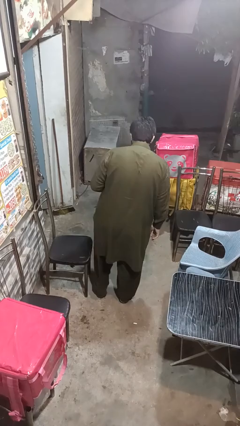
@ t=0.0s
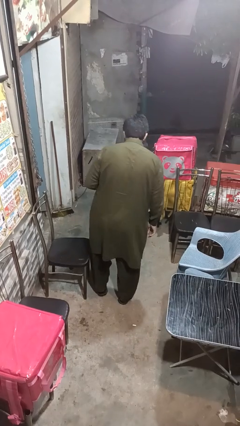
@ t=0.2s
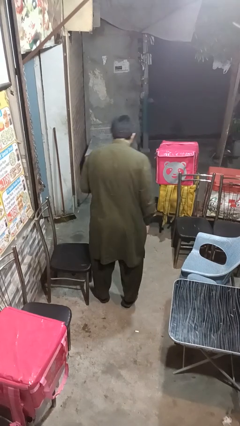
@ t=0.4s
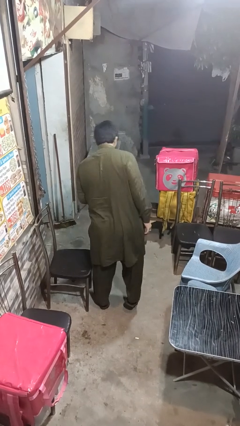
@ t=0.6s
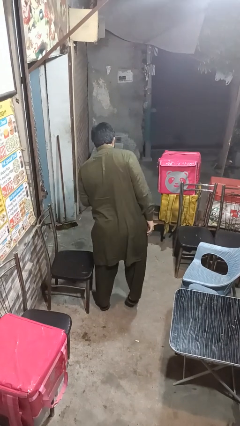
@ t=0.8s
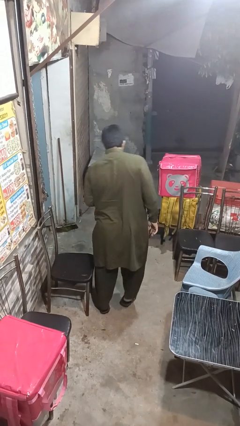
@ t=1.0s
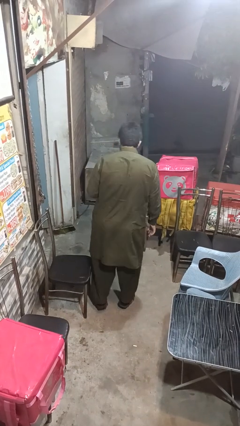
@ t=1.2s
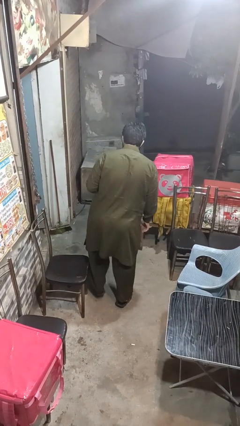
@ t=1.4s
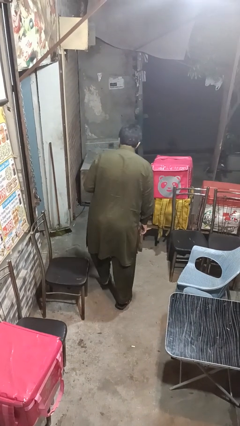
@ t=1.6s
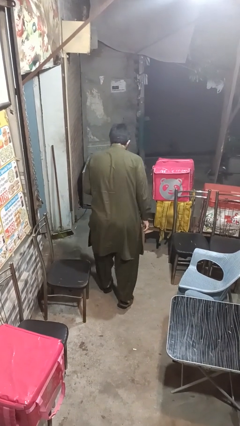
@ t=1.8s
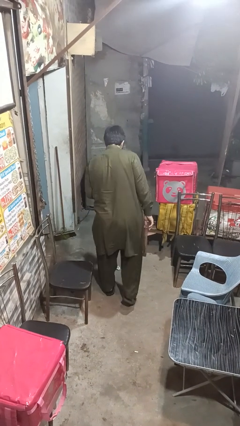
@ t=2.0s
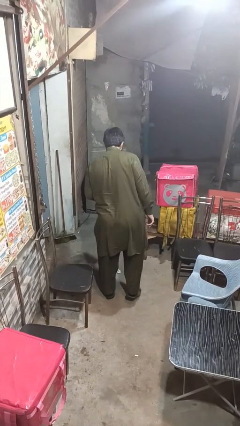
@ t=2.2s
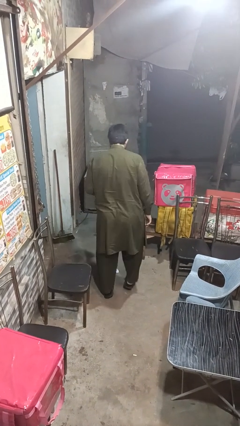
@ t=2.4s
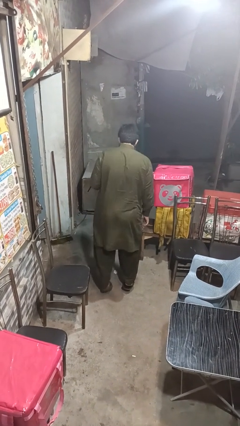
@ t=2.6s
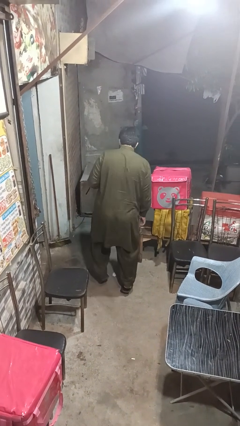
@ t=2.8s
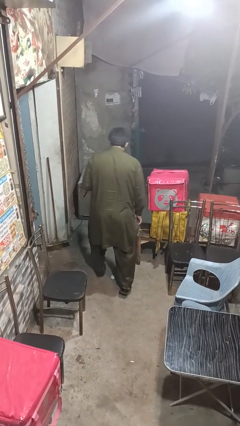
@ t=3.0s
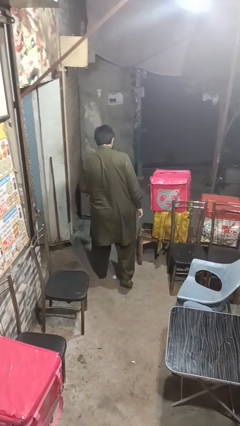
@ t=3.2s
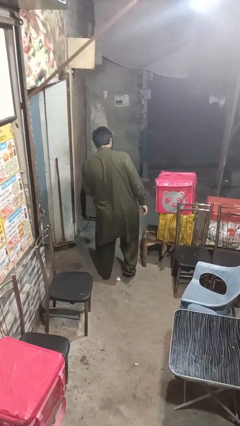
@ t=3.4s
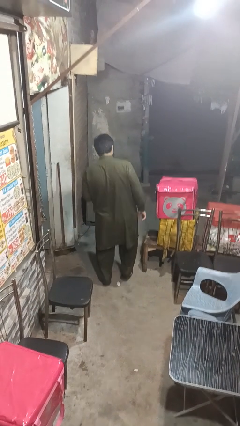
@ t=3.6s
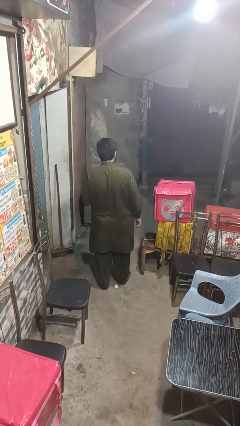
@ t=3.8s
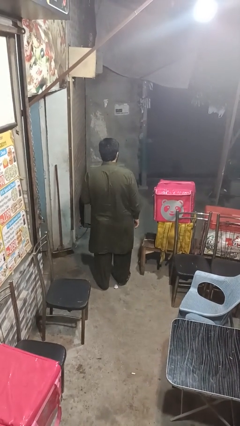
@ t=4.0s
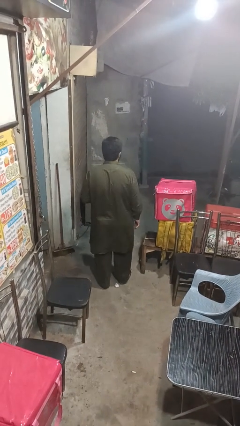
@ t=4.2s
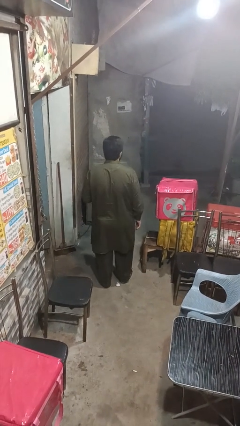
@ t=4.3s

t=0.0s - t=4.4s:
person walks tiptoe

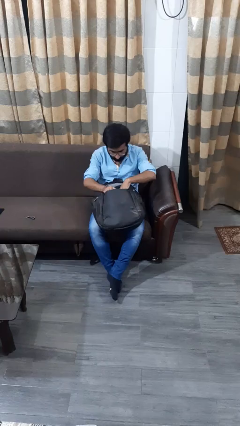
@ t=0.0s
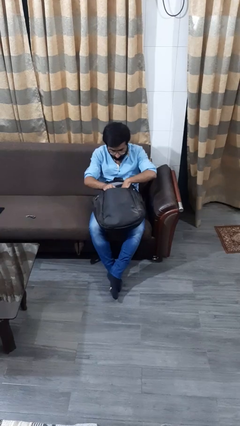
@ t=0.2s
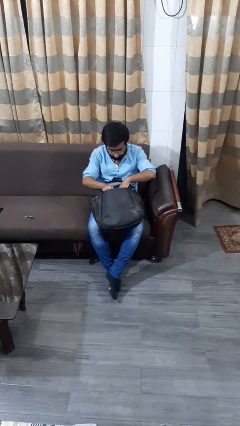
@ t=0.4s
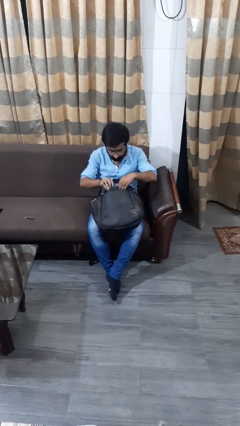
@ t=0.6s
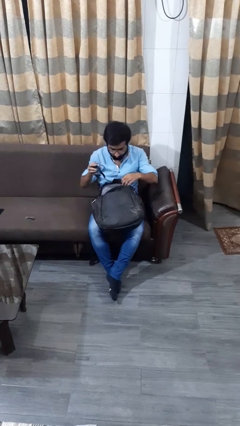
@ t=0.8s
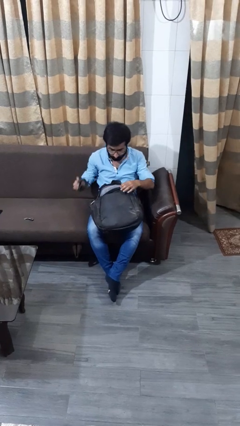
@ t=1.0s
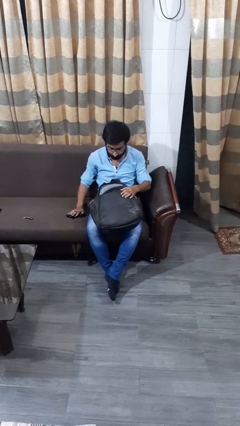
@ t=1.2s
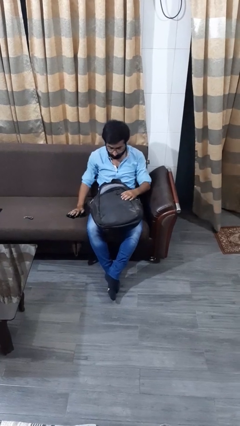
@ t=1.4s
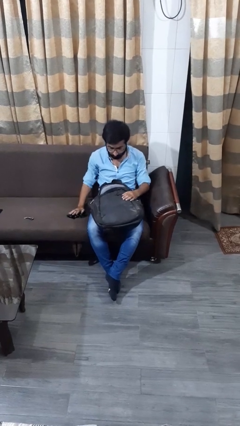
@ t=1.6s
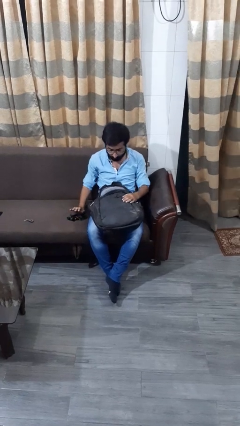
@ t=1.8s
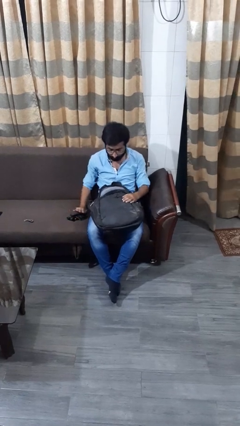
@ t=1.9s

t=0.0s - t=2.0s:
person takes object from backpack

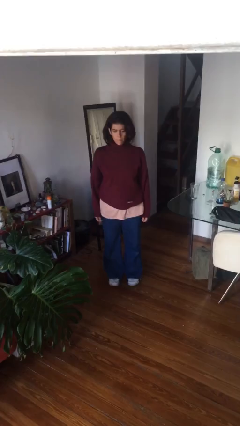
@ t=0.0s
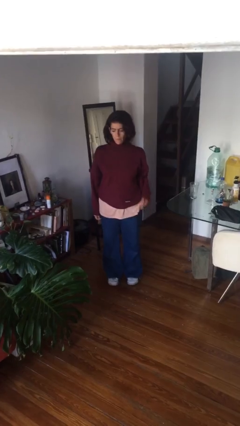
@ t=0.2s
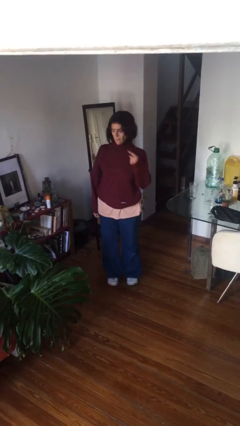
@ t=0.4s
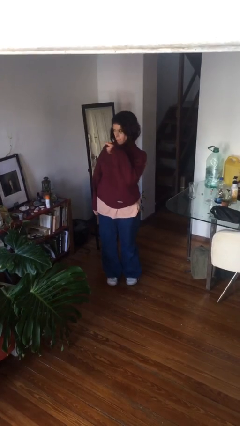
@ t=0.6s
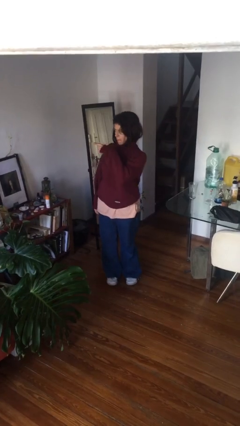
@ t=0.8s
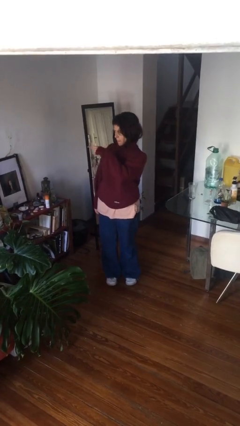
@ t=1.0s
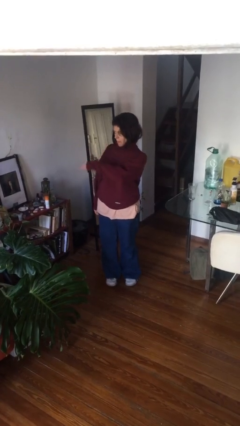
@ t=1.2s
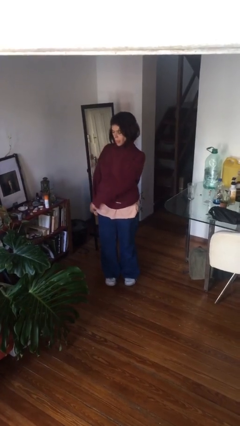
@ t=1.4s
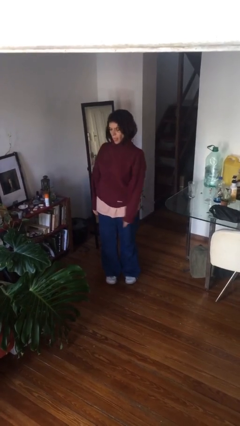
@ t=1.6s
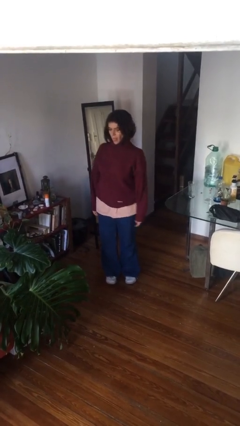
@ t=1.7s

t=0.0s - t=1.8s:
person gestures swipe right

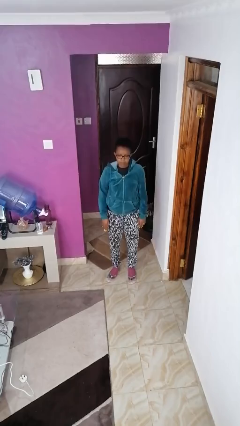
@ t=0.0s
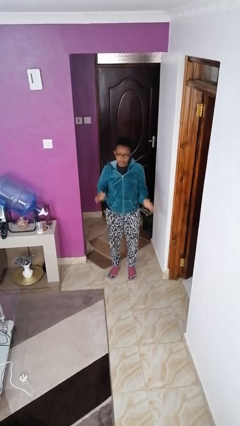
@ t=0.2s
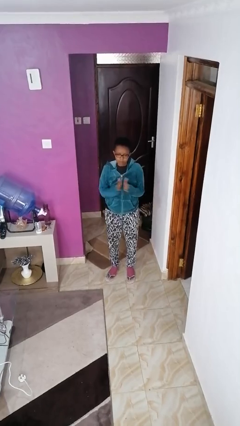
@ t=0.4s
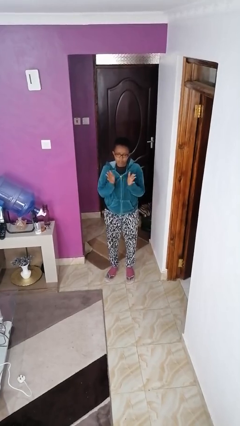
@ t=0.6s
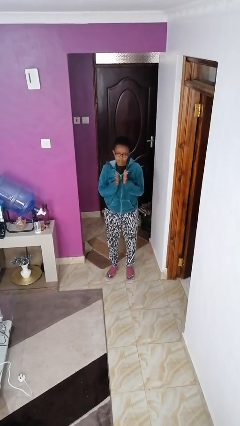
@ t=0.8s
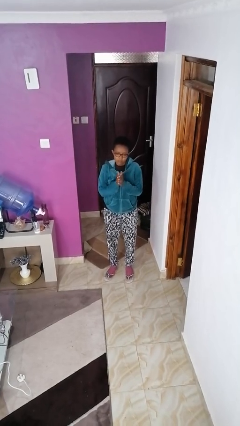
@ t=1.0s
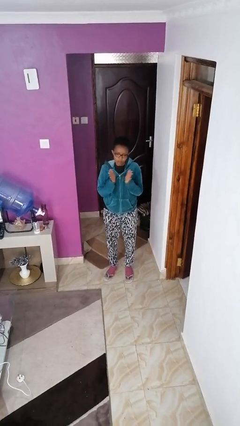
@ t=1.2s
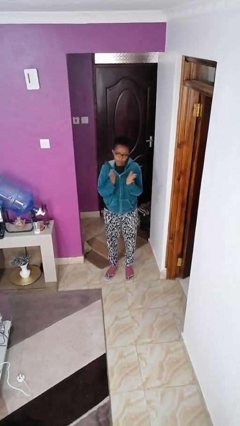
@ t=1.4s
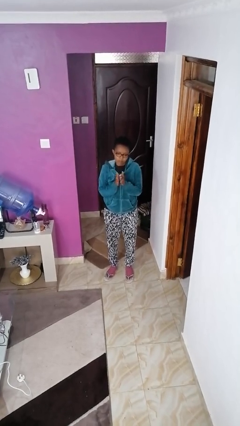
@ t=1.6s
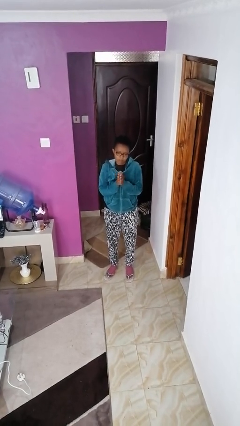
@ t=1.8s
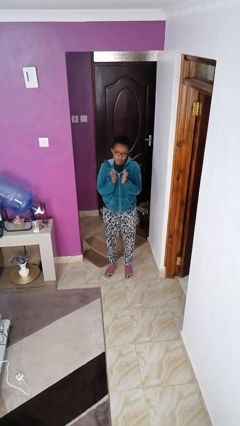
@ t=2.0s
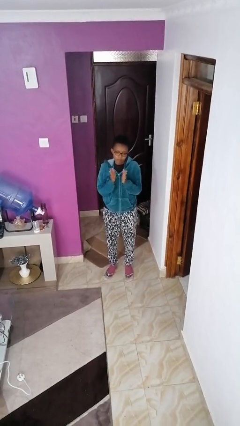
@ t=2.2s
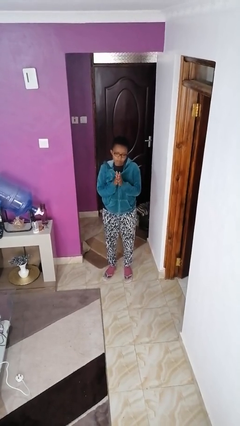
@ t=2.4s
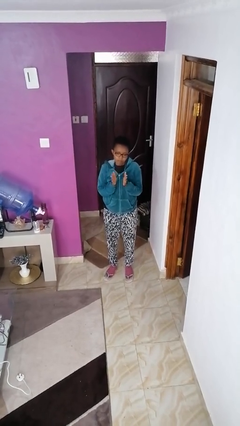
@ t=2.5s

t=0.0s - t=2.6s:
person claps hands

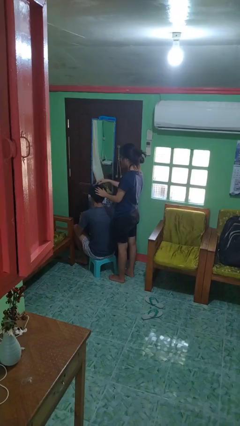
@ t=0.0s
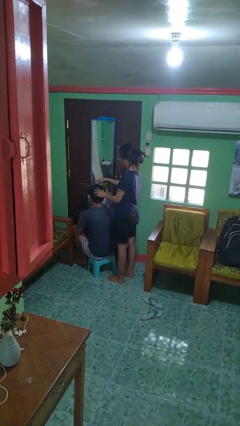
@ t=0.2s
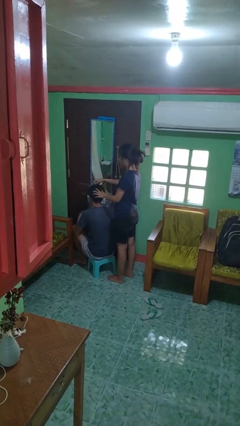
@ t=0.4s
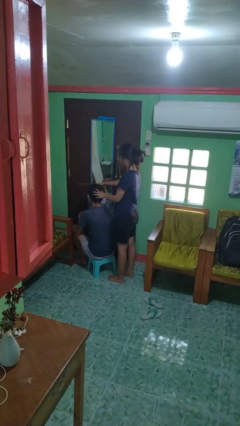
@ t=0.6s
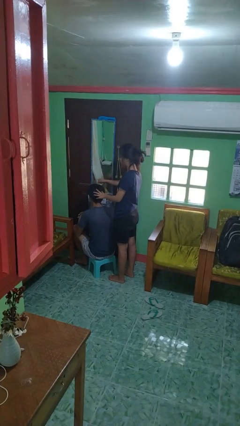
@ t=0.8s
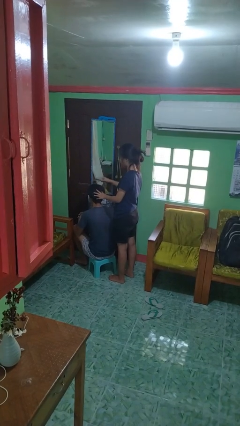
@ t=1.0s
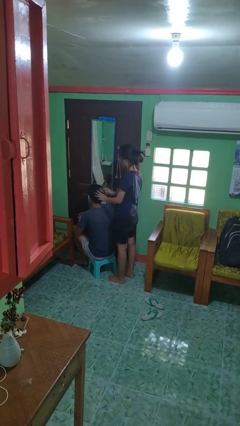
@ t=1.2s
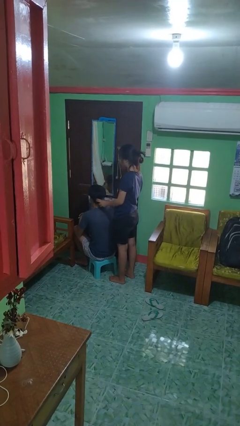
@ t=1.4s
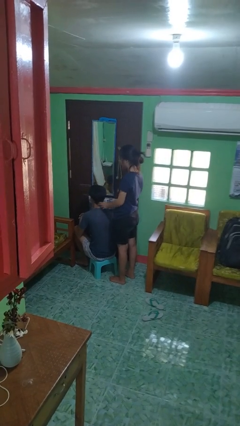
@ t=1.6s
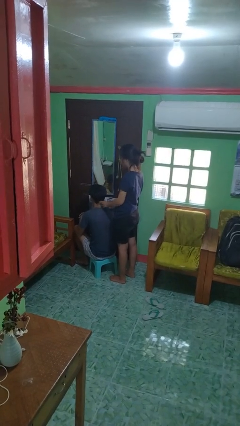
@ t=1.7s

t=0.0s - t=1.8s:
person brushes hair of person

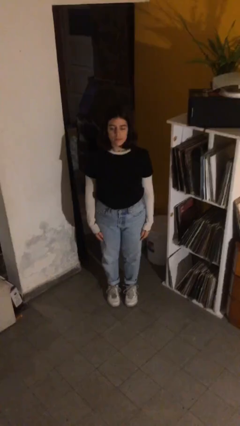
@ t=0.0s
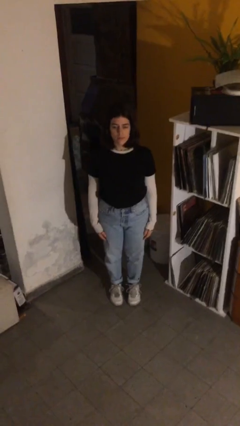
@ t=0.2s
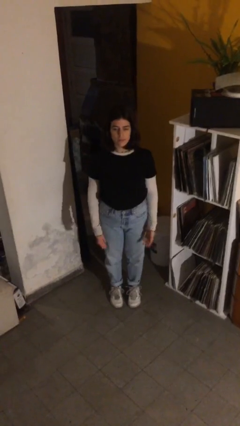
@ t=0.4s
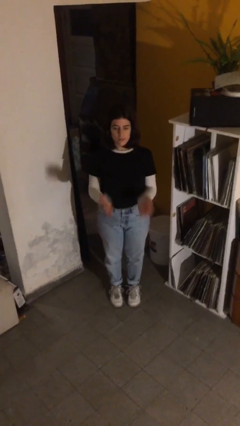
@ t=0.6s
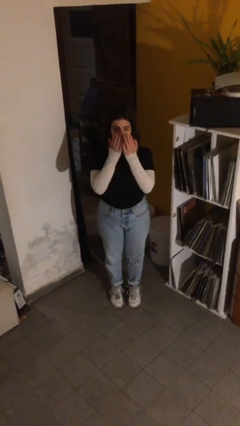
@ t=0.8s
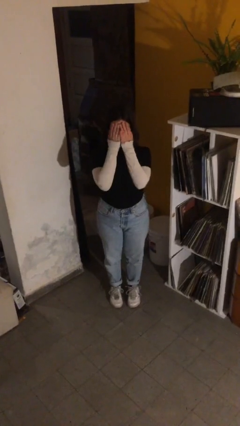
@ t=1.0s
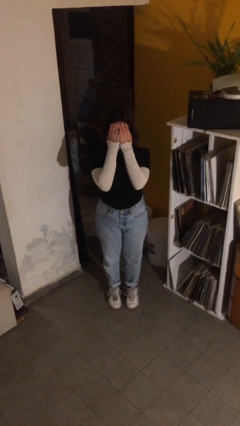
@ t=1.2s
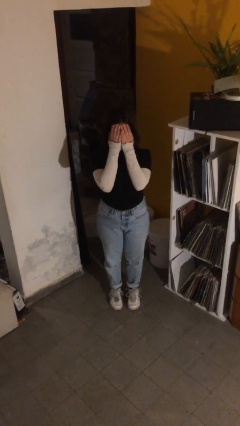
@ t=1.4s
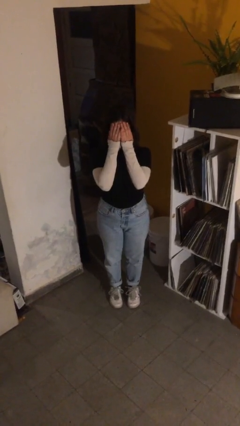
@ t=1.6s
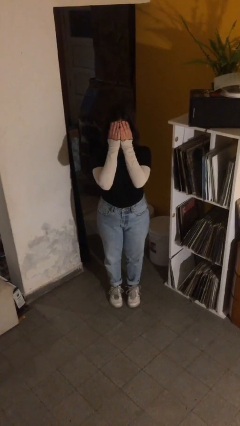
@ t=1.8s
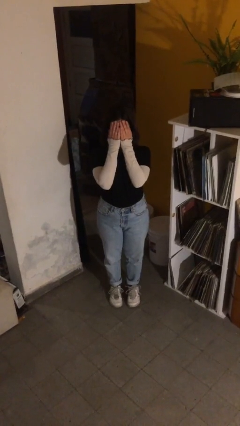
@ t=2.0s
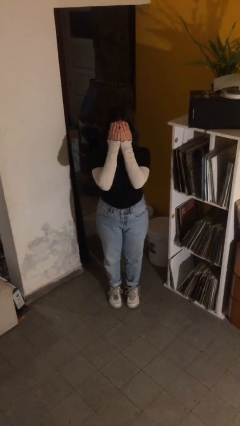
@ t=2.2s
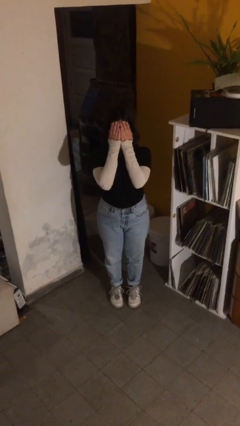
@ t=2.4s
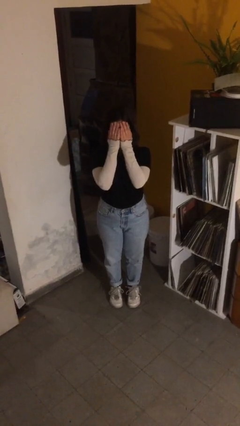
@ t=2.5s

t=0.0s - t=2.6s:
person covers face with hands

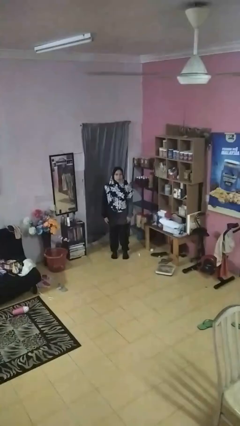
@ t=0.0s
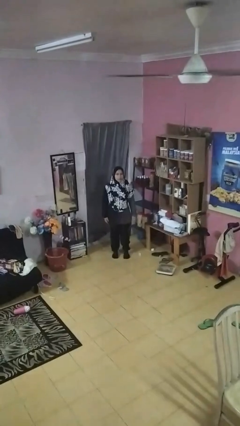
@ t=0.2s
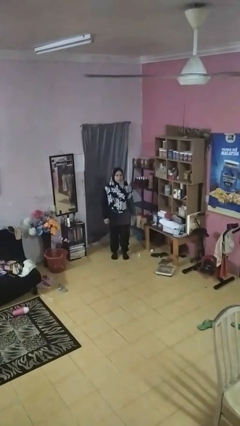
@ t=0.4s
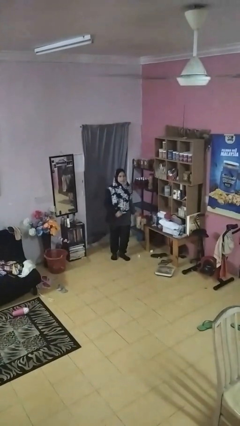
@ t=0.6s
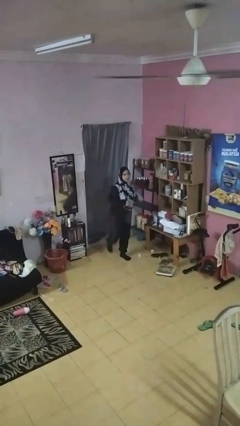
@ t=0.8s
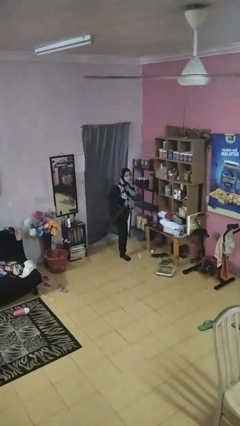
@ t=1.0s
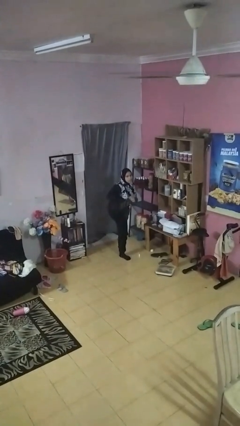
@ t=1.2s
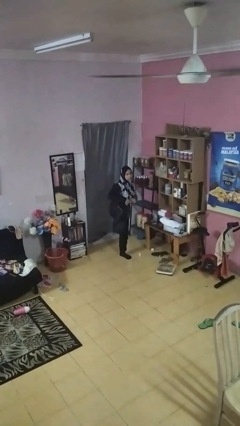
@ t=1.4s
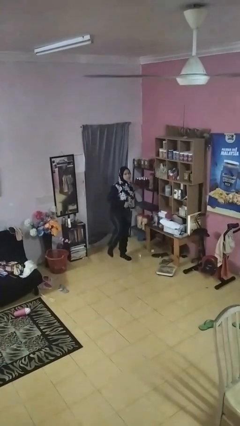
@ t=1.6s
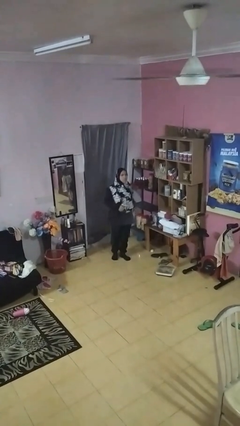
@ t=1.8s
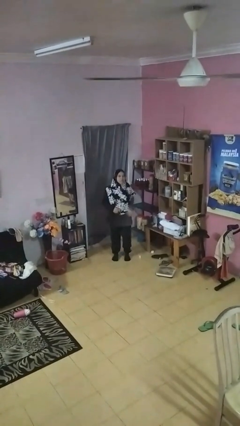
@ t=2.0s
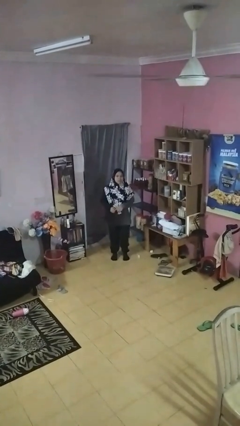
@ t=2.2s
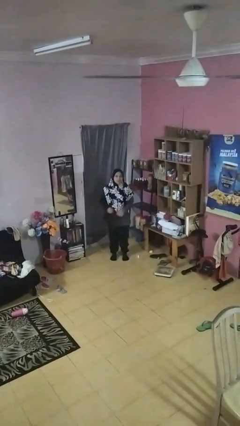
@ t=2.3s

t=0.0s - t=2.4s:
person karate kicks
